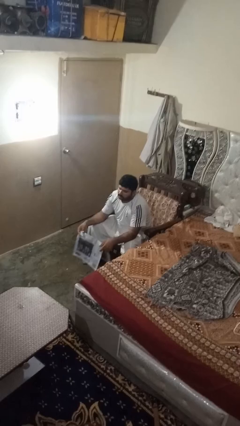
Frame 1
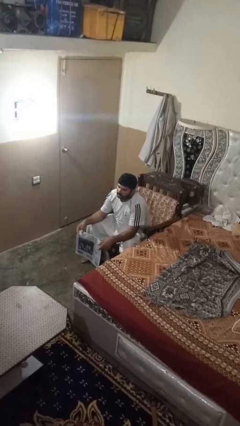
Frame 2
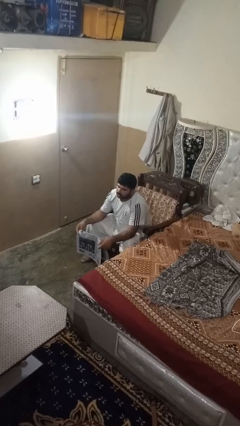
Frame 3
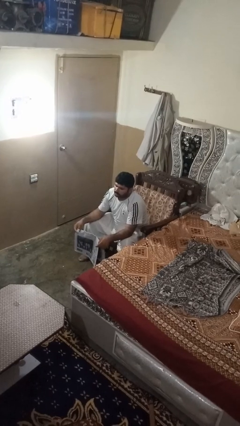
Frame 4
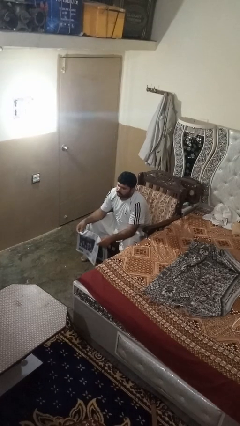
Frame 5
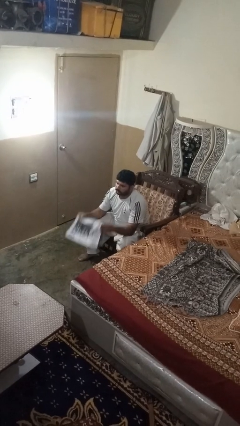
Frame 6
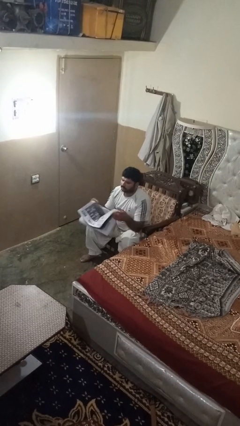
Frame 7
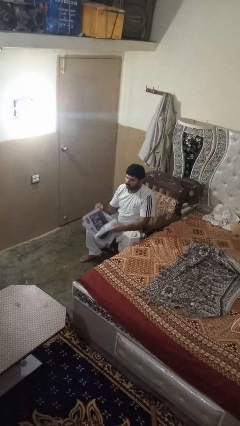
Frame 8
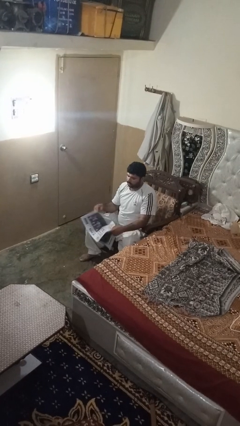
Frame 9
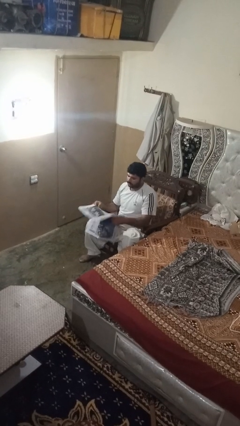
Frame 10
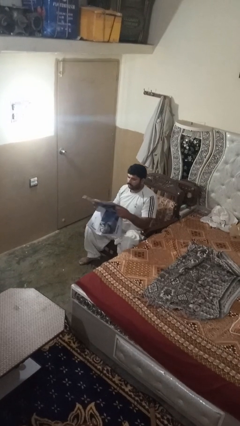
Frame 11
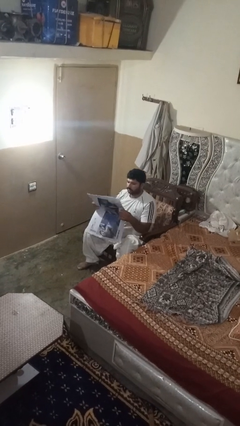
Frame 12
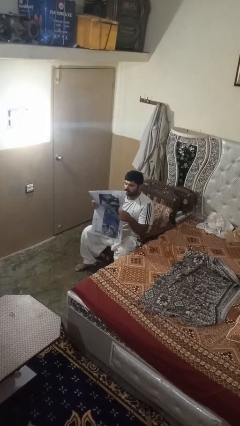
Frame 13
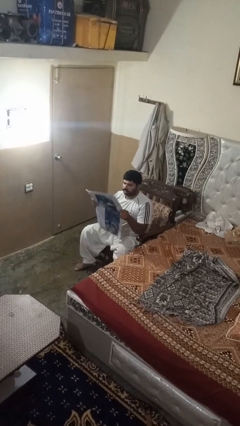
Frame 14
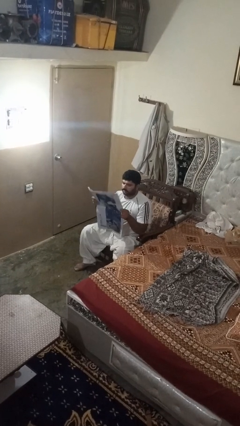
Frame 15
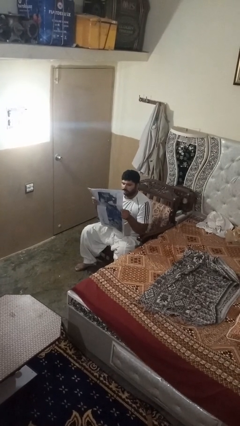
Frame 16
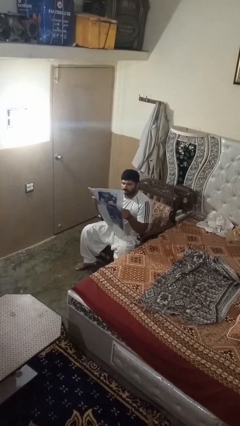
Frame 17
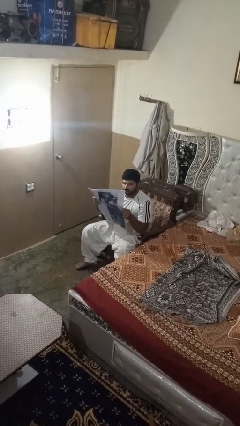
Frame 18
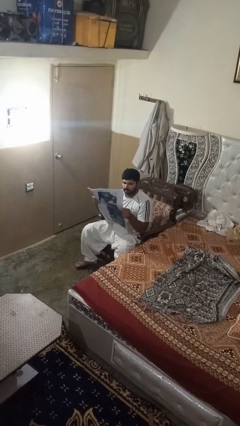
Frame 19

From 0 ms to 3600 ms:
person reads newspaper

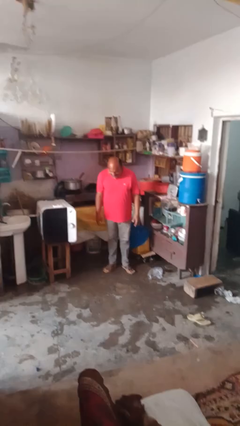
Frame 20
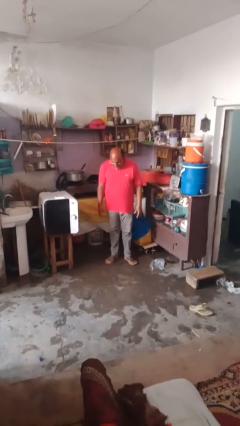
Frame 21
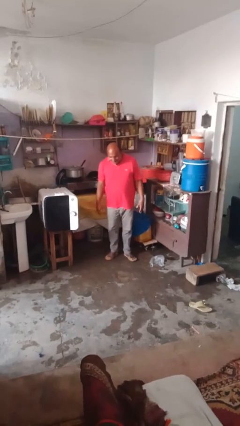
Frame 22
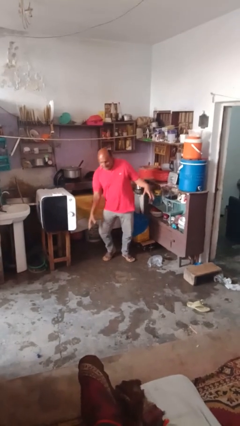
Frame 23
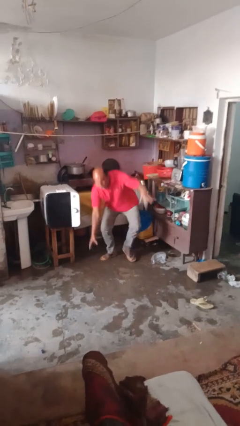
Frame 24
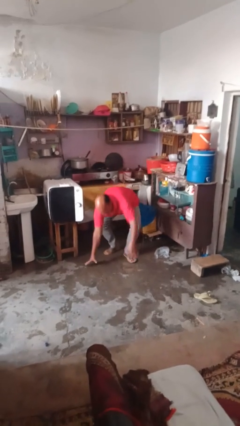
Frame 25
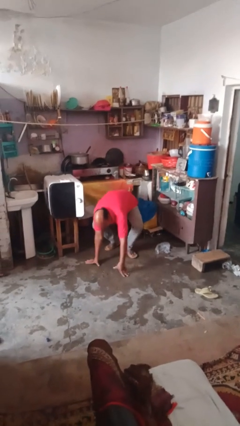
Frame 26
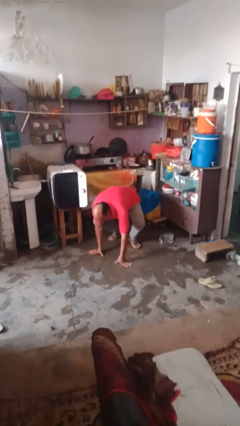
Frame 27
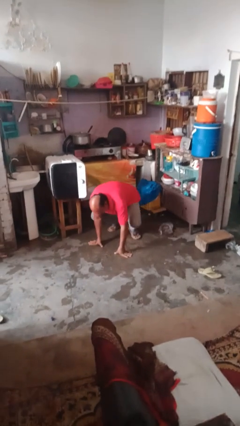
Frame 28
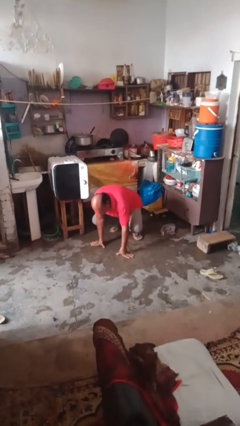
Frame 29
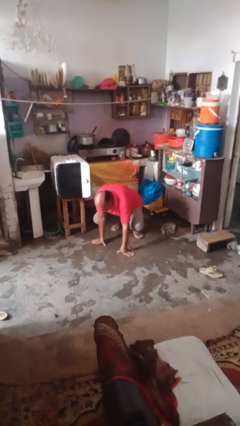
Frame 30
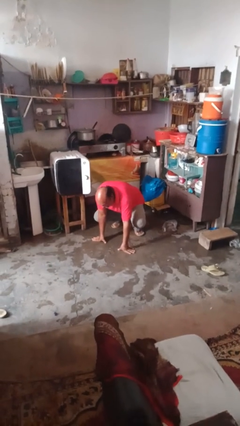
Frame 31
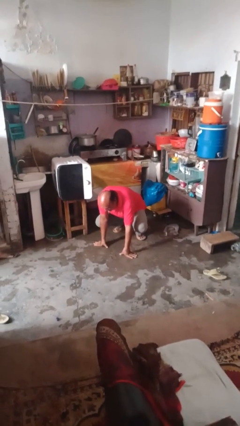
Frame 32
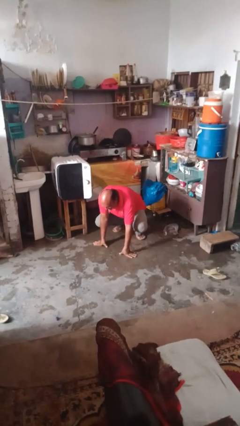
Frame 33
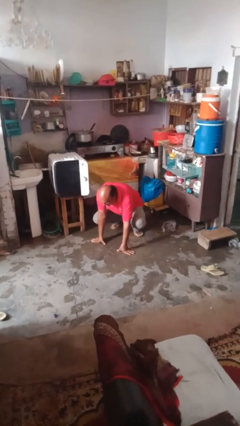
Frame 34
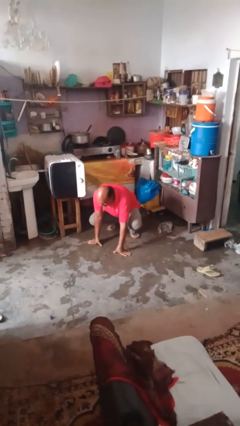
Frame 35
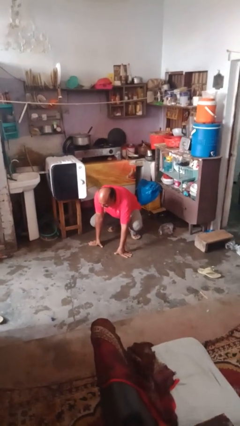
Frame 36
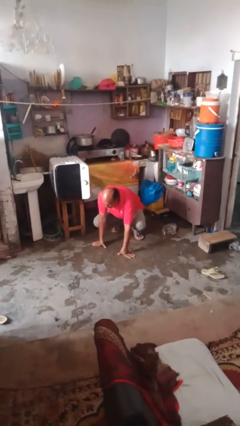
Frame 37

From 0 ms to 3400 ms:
person falls while standing

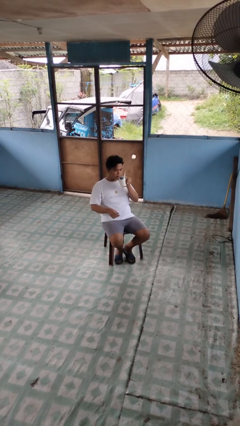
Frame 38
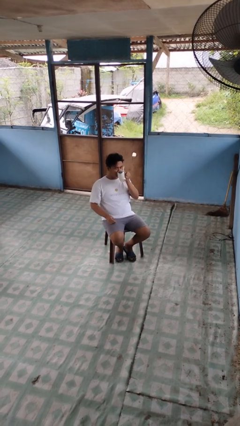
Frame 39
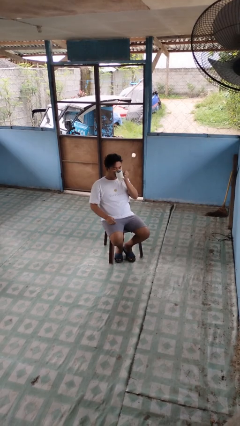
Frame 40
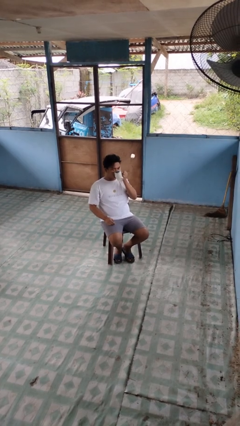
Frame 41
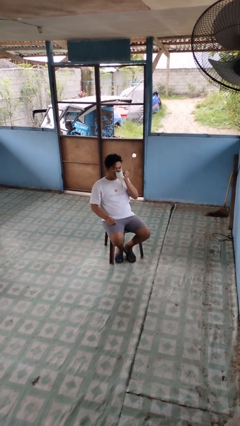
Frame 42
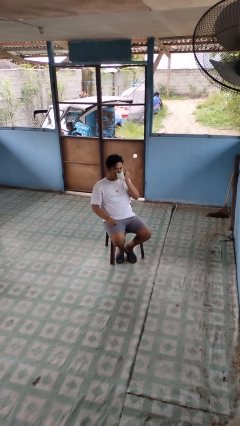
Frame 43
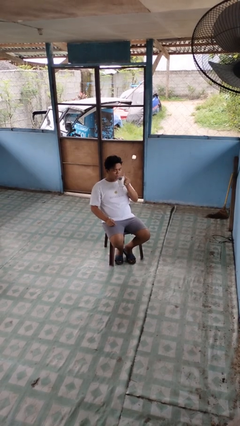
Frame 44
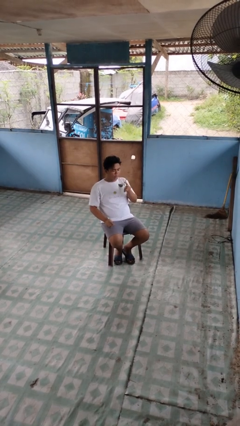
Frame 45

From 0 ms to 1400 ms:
person drinks from mug

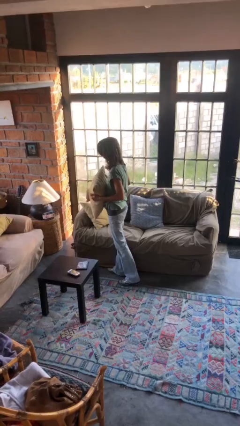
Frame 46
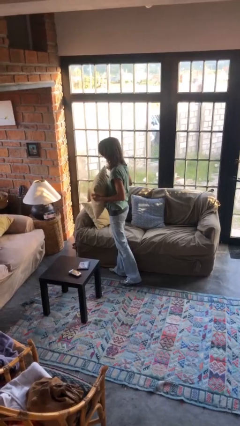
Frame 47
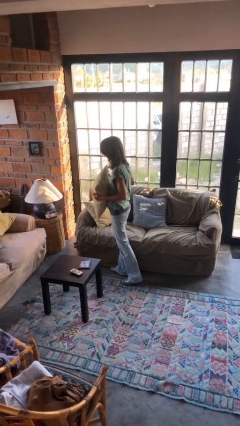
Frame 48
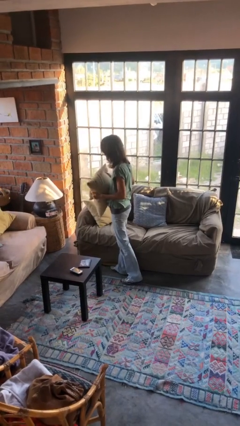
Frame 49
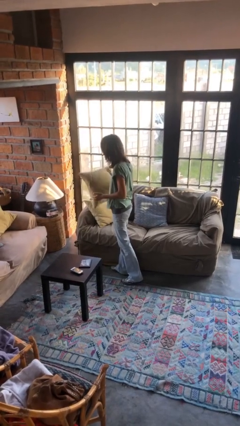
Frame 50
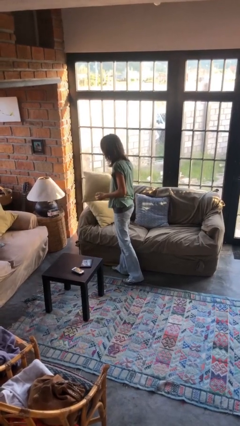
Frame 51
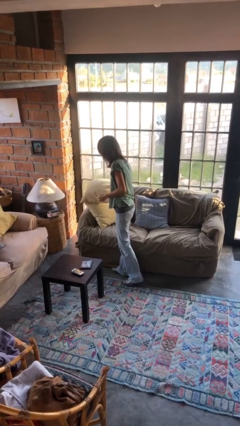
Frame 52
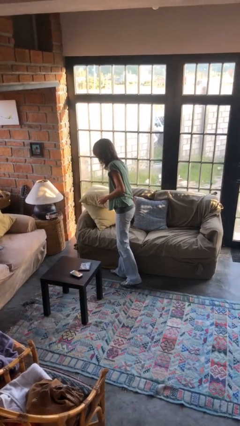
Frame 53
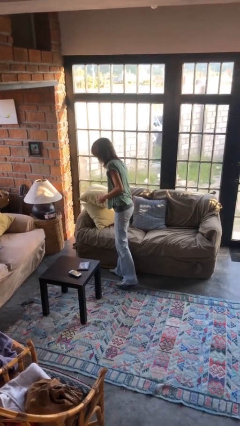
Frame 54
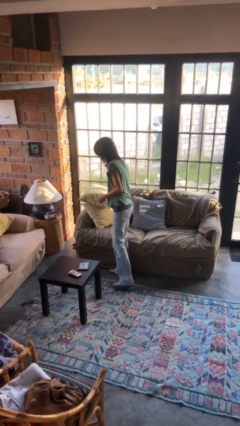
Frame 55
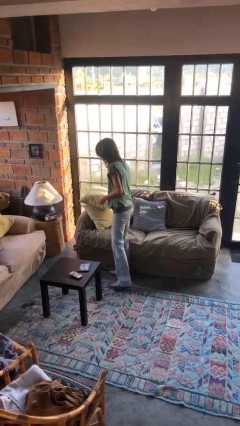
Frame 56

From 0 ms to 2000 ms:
person puts down object on couch

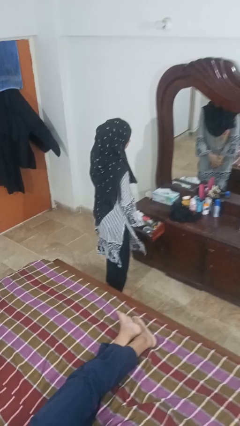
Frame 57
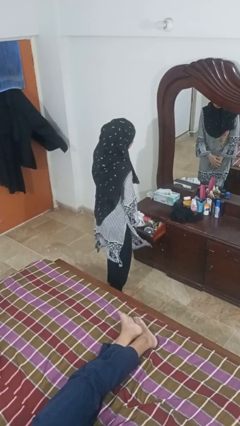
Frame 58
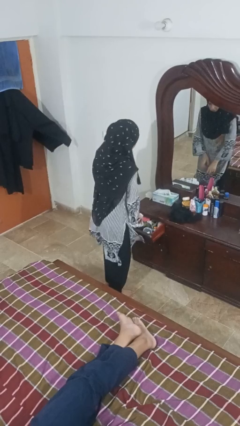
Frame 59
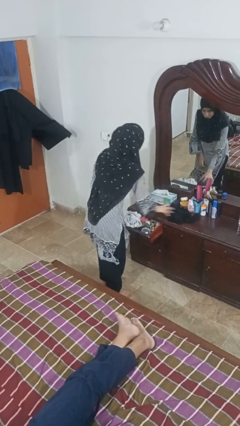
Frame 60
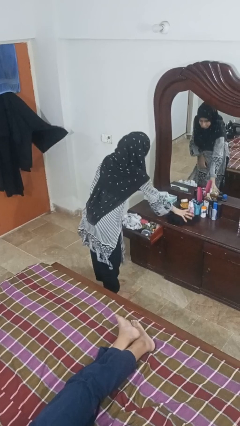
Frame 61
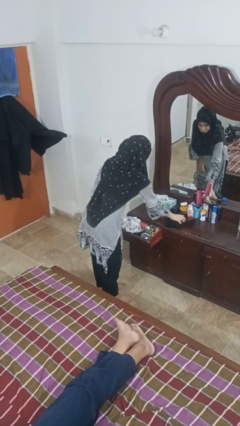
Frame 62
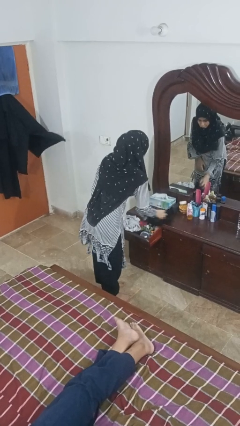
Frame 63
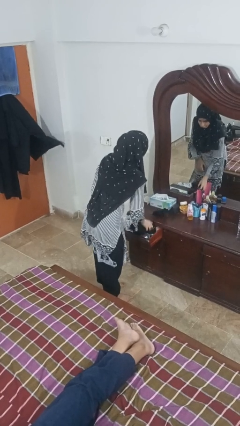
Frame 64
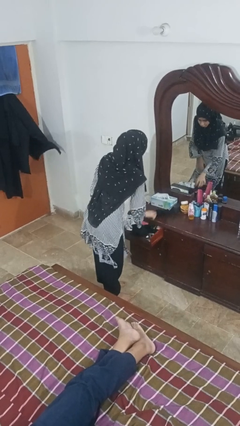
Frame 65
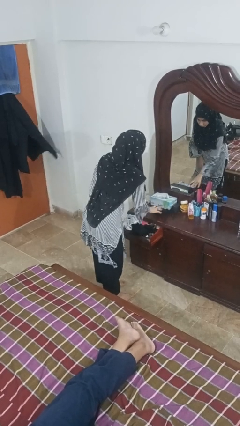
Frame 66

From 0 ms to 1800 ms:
person puts clothes into dresser

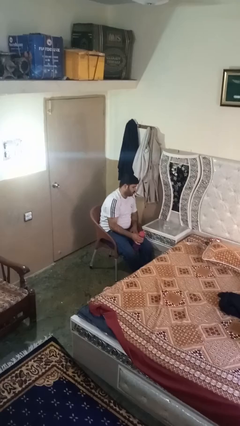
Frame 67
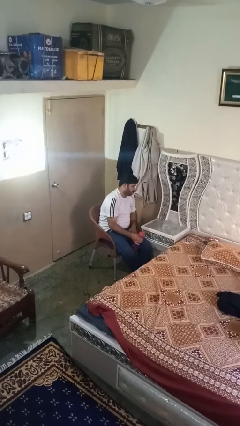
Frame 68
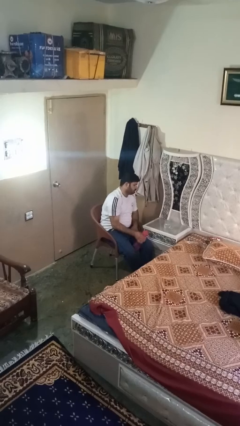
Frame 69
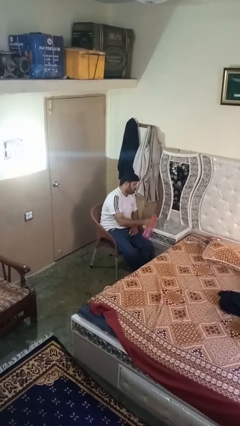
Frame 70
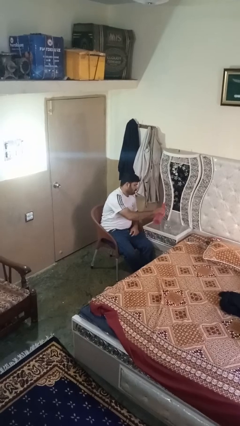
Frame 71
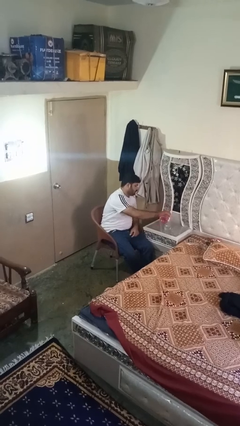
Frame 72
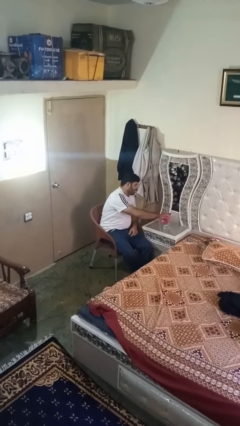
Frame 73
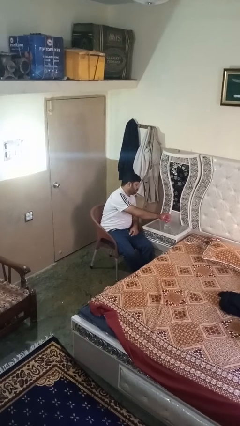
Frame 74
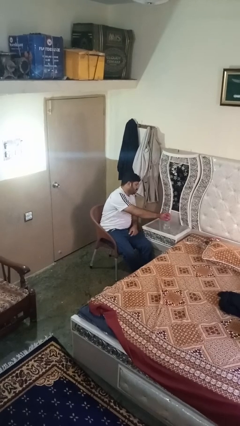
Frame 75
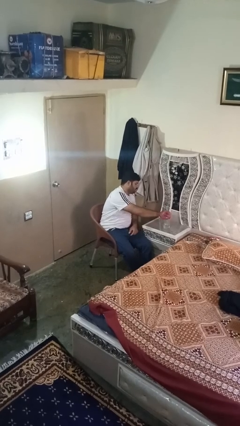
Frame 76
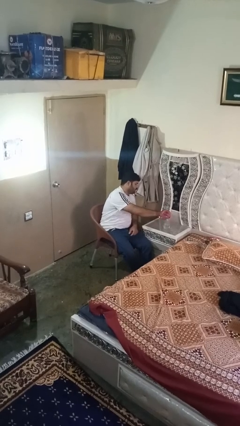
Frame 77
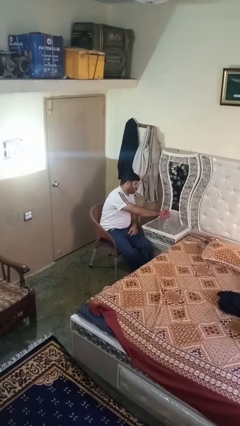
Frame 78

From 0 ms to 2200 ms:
person pours liquid into cup

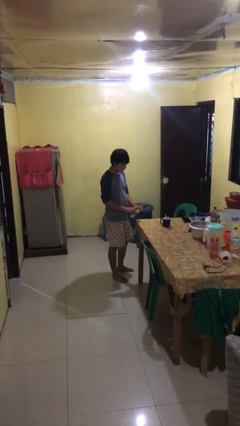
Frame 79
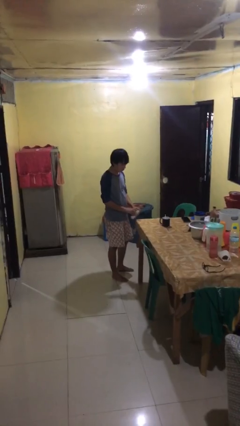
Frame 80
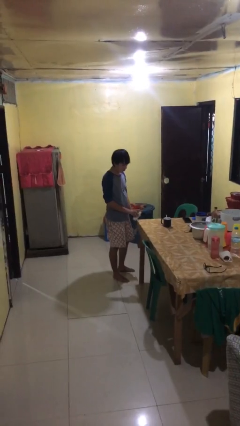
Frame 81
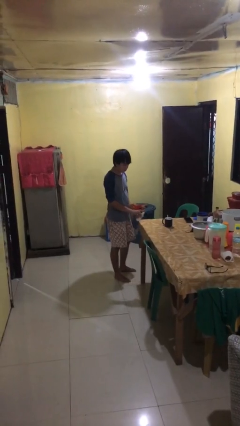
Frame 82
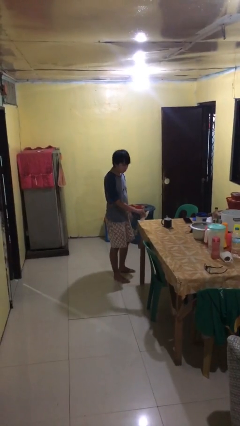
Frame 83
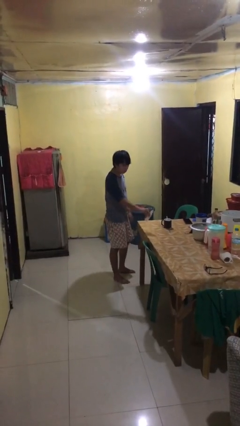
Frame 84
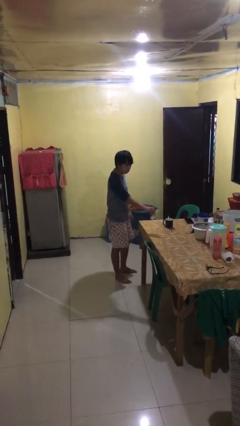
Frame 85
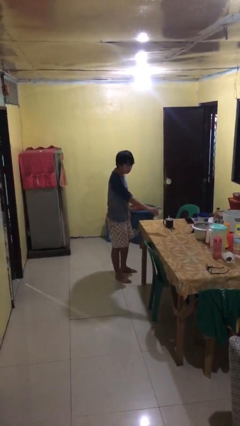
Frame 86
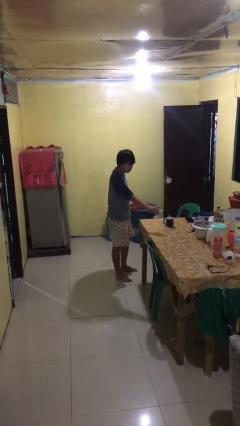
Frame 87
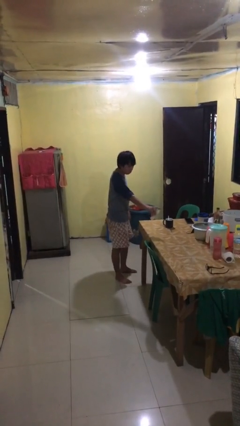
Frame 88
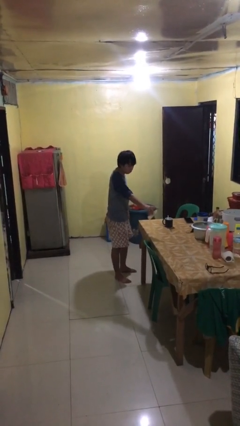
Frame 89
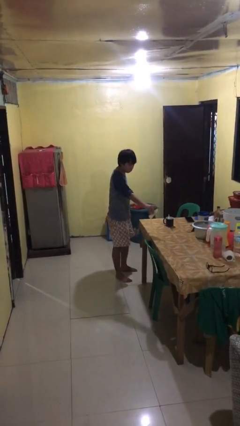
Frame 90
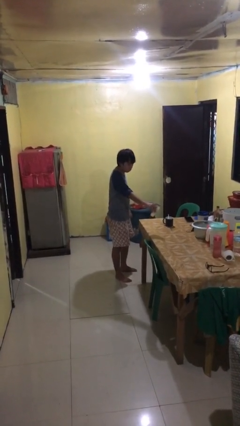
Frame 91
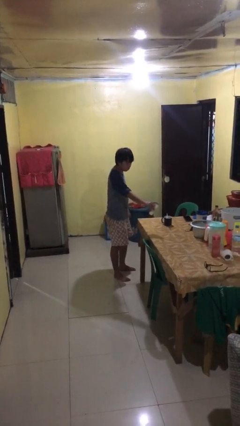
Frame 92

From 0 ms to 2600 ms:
person sprays from bottle
